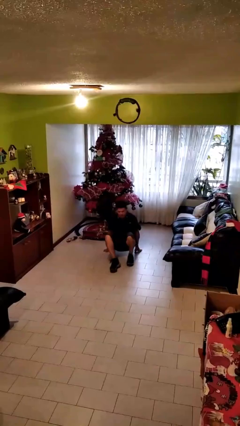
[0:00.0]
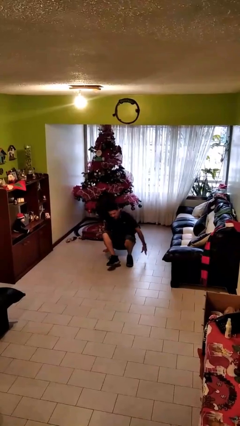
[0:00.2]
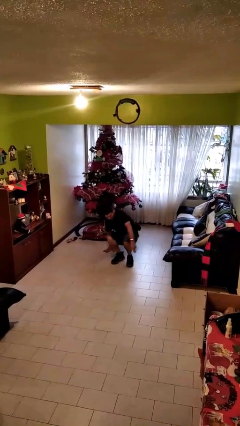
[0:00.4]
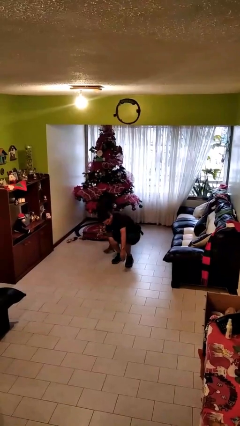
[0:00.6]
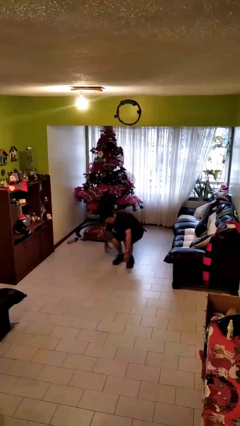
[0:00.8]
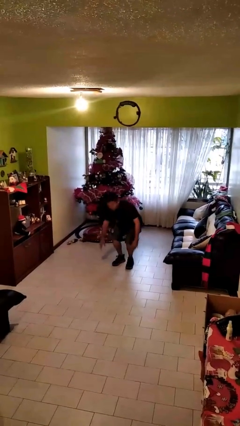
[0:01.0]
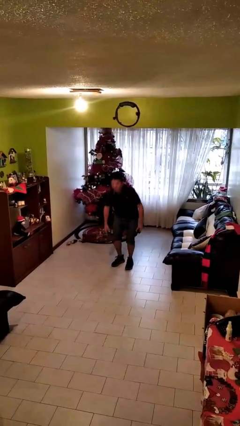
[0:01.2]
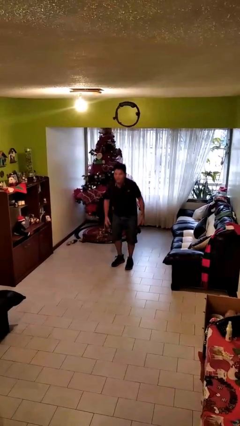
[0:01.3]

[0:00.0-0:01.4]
person stands up

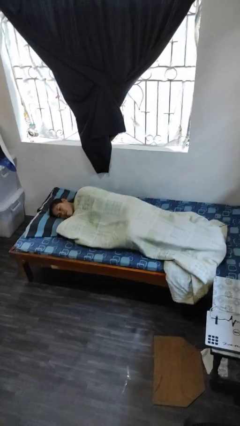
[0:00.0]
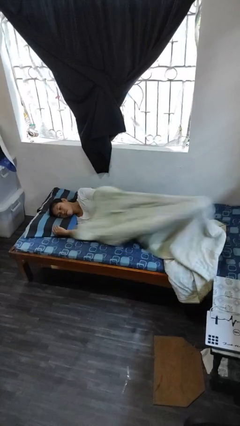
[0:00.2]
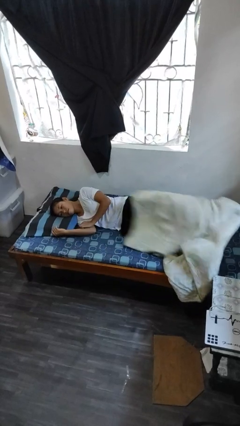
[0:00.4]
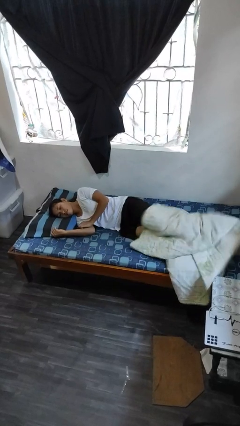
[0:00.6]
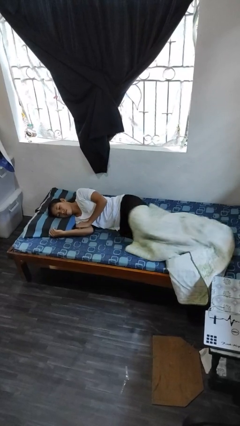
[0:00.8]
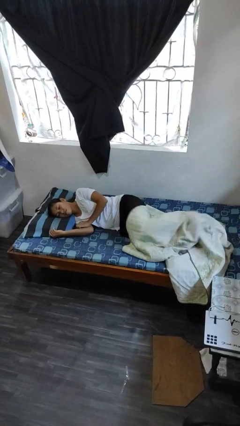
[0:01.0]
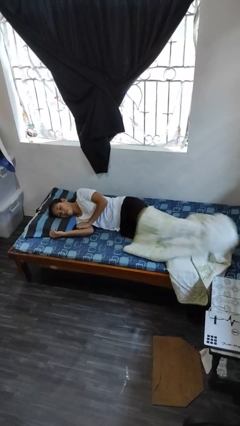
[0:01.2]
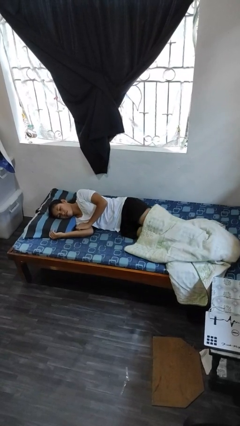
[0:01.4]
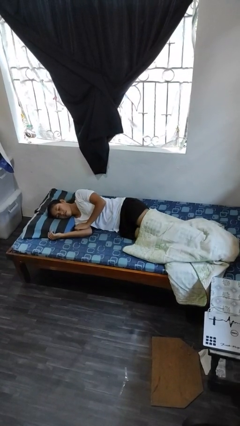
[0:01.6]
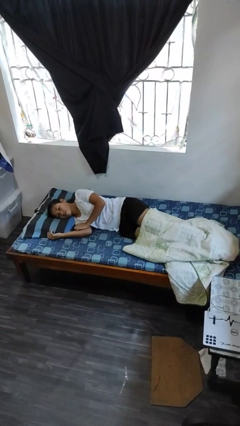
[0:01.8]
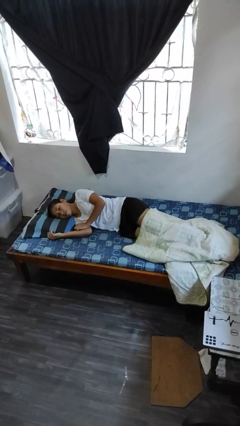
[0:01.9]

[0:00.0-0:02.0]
person uncovers with bedsheets

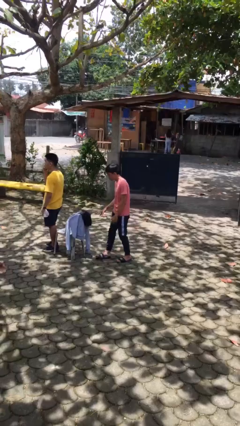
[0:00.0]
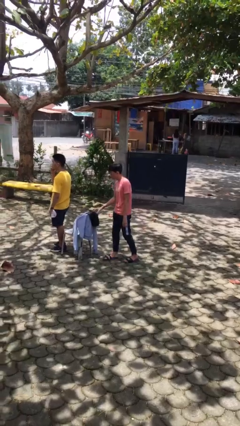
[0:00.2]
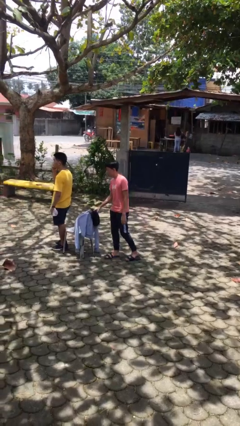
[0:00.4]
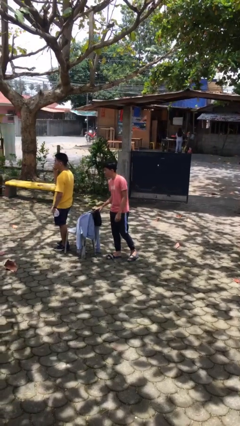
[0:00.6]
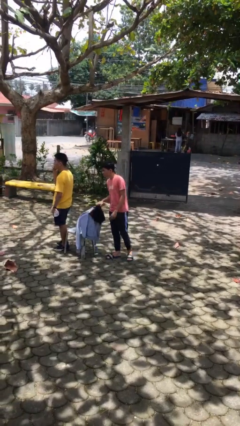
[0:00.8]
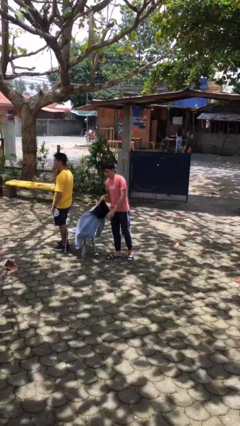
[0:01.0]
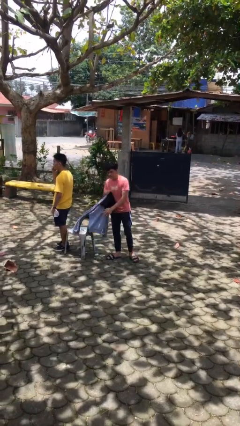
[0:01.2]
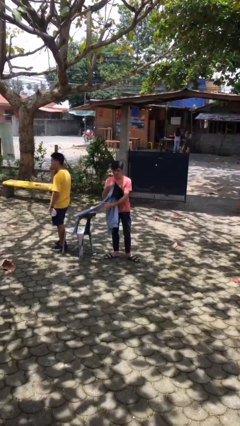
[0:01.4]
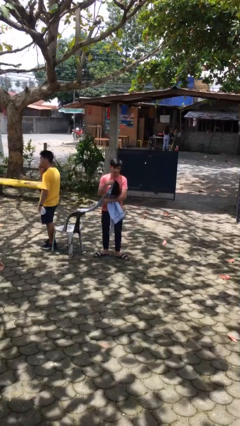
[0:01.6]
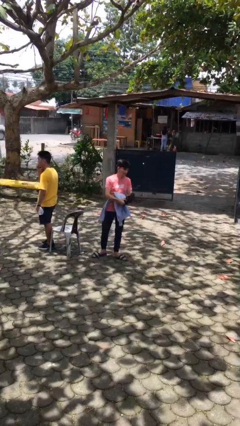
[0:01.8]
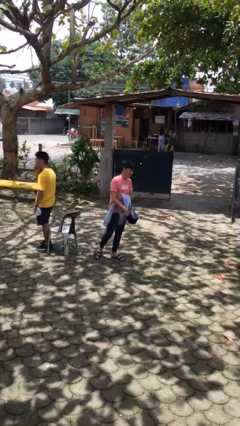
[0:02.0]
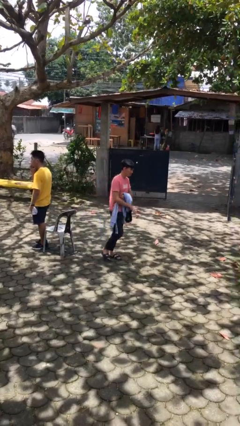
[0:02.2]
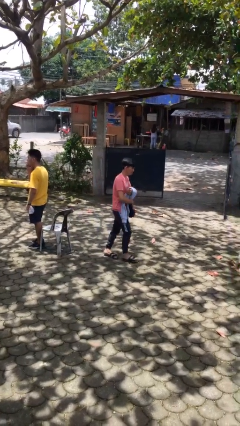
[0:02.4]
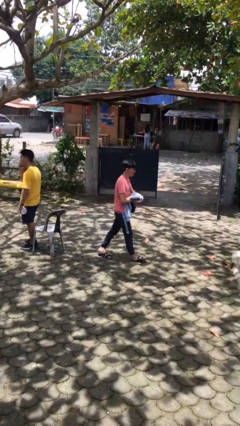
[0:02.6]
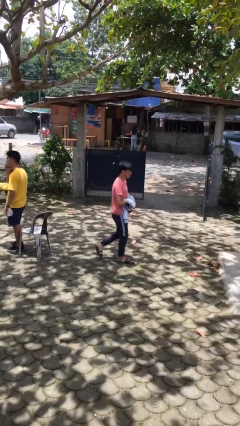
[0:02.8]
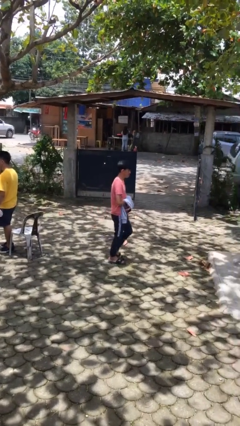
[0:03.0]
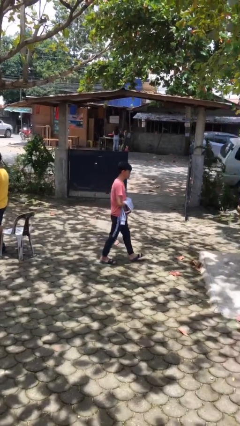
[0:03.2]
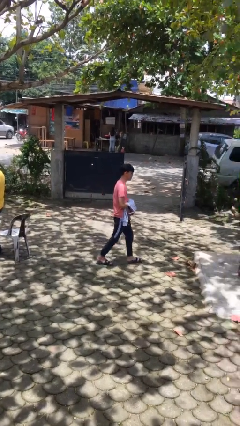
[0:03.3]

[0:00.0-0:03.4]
person steals object from person

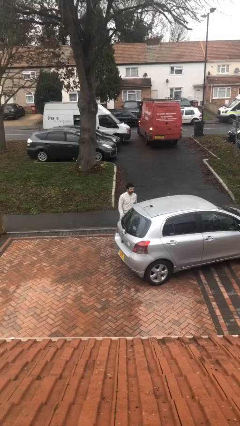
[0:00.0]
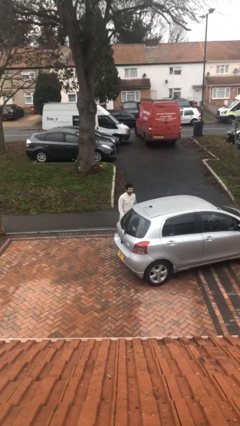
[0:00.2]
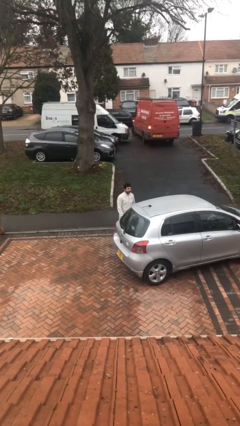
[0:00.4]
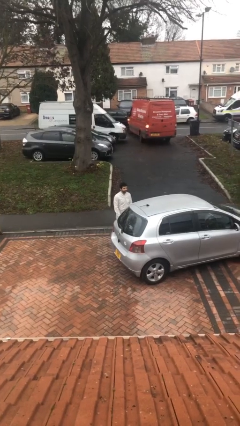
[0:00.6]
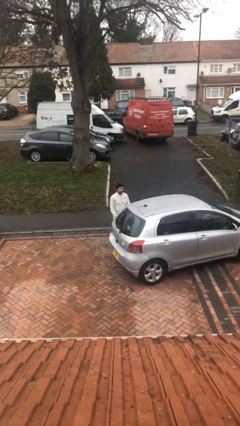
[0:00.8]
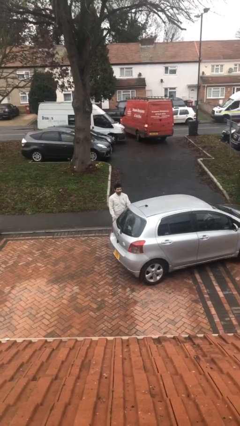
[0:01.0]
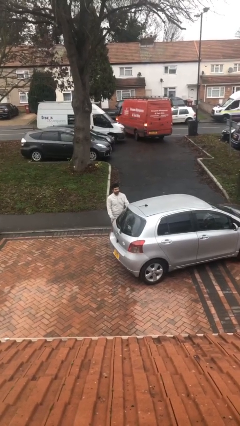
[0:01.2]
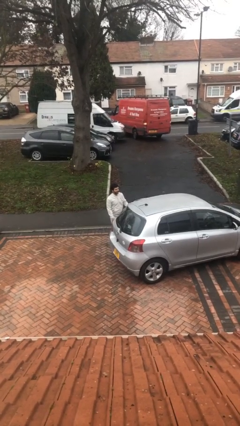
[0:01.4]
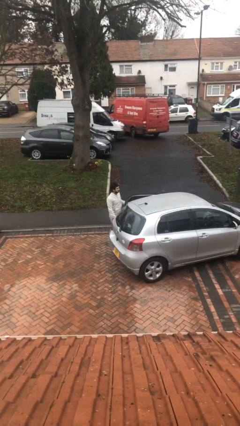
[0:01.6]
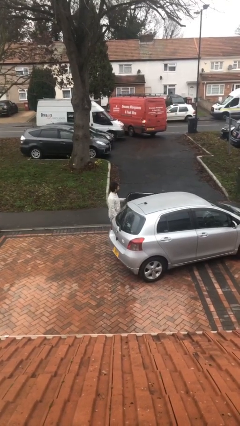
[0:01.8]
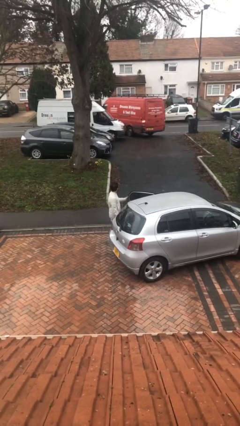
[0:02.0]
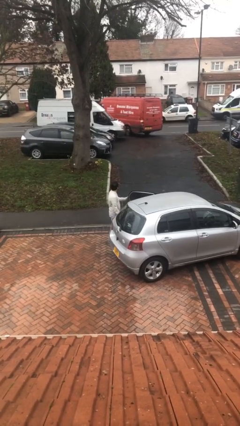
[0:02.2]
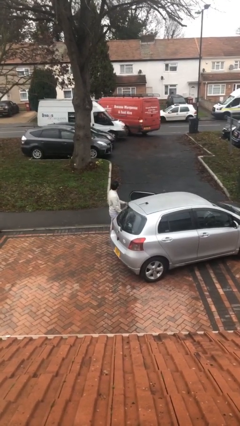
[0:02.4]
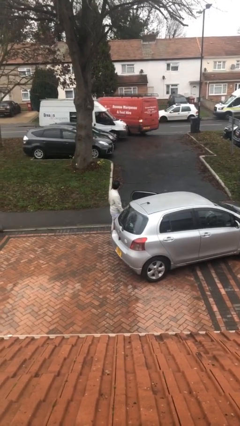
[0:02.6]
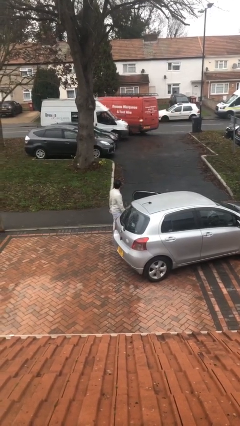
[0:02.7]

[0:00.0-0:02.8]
person opens car door

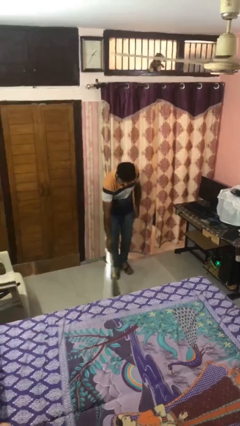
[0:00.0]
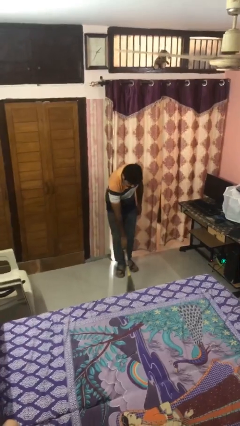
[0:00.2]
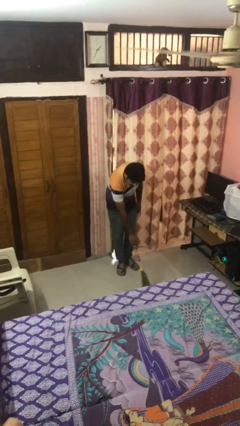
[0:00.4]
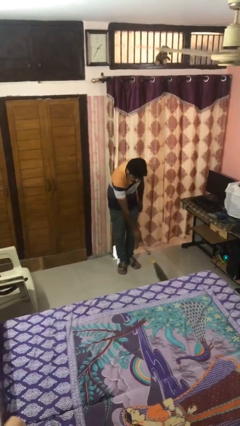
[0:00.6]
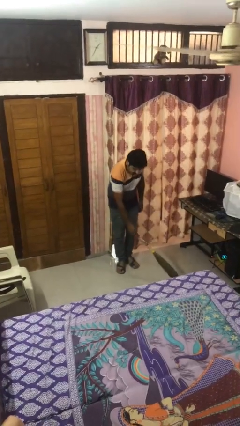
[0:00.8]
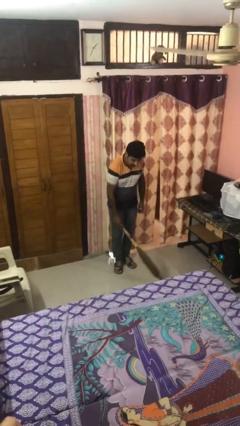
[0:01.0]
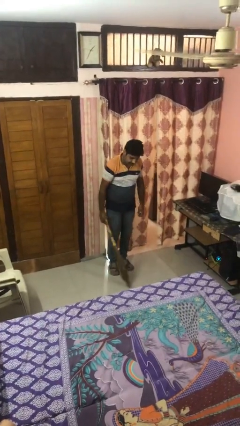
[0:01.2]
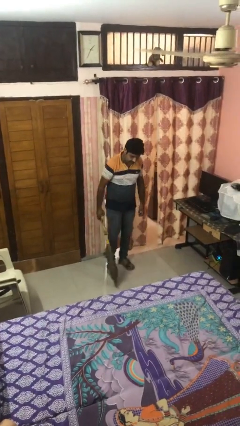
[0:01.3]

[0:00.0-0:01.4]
person sweeps floor

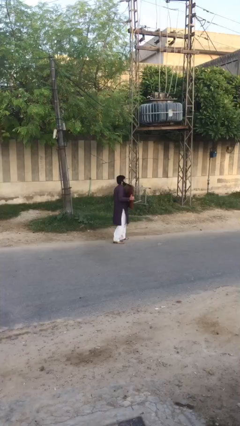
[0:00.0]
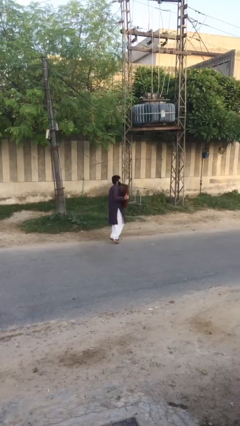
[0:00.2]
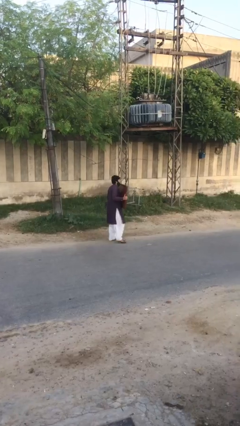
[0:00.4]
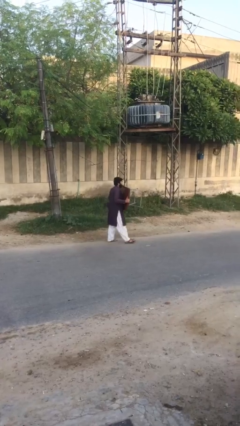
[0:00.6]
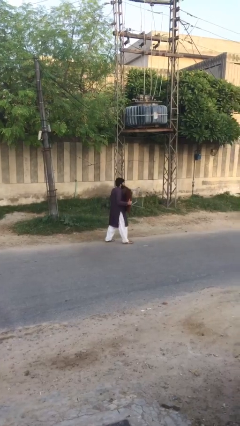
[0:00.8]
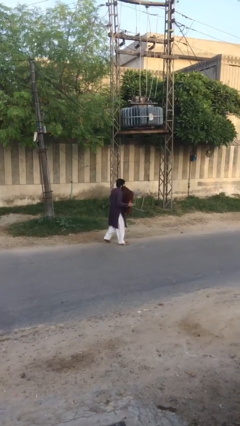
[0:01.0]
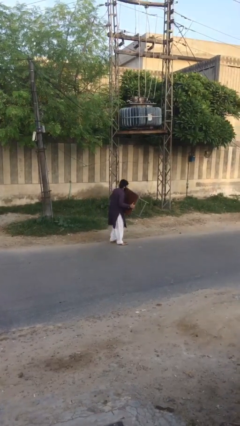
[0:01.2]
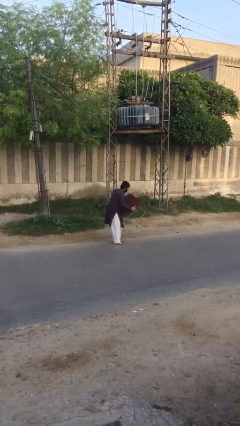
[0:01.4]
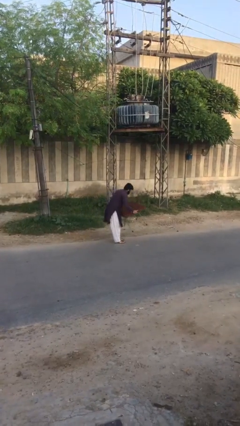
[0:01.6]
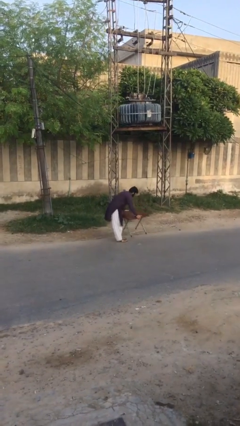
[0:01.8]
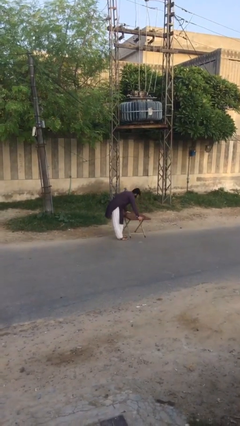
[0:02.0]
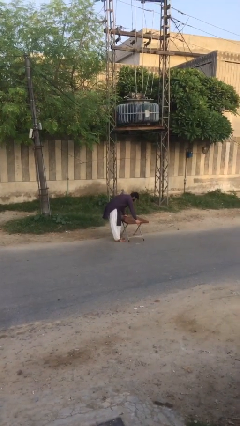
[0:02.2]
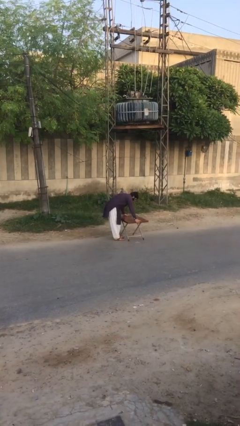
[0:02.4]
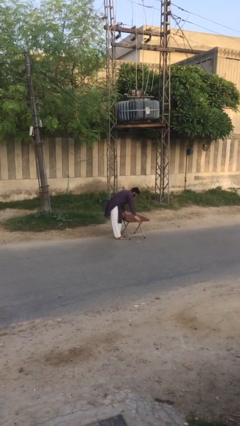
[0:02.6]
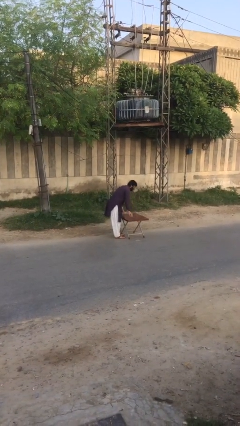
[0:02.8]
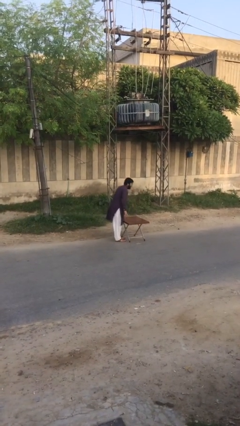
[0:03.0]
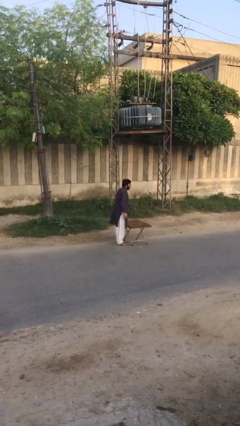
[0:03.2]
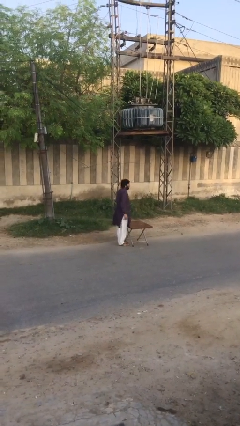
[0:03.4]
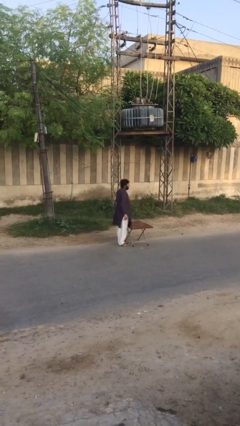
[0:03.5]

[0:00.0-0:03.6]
person puts down object on floor

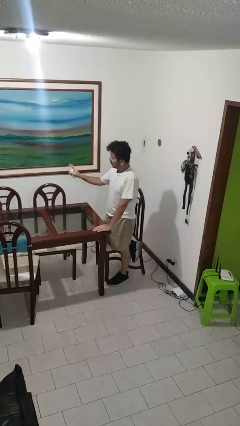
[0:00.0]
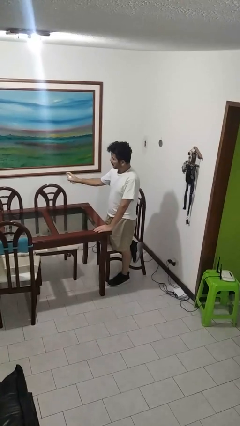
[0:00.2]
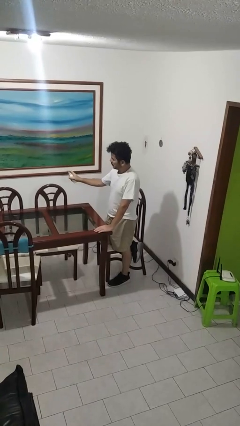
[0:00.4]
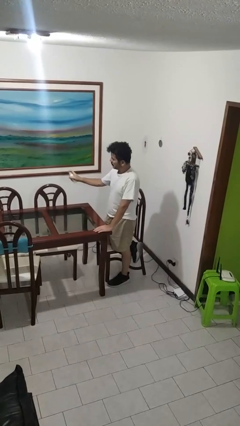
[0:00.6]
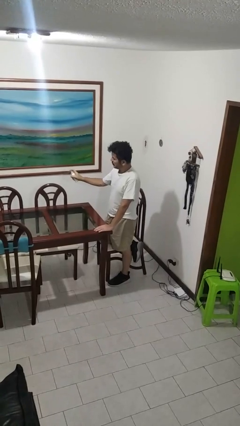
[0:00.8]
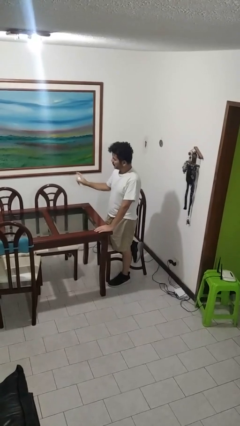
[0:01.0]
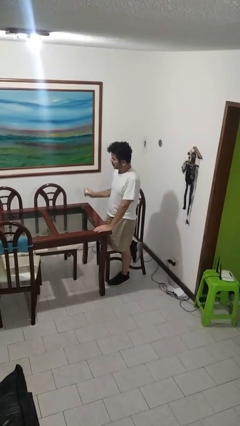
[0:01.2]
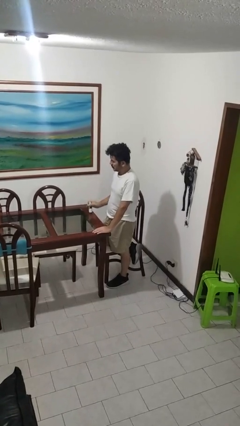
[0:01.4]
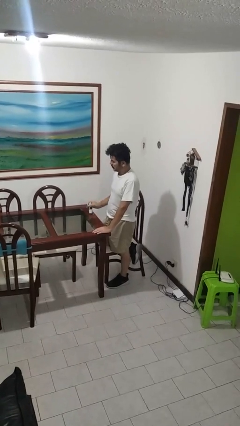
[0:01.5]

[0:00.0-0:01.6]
person sprays from bottle

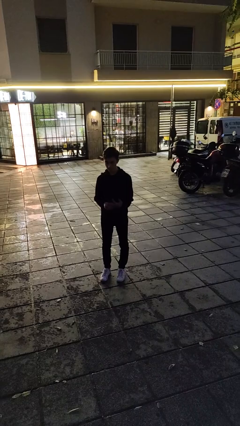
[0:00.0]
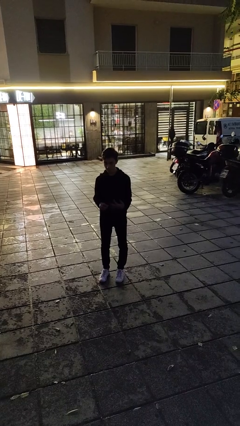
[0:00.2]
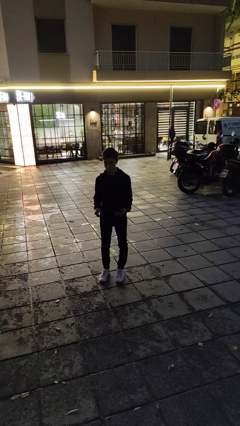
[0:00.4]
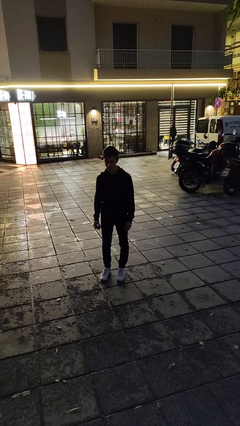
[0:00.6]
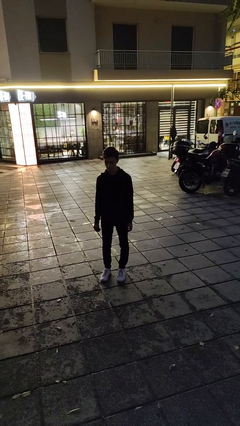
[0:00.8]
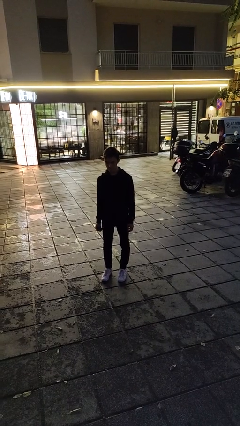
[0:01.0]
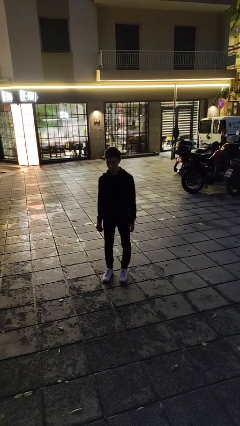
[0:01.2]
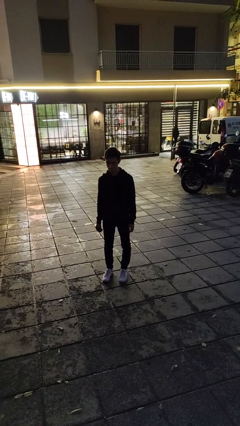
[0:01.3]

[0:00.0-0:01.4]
person takes off ring
